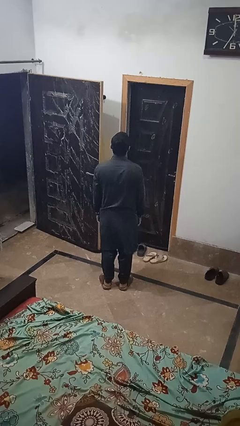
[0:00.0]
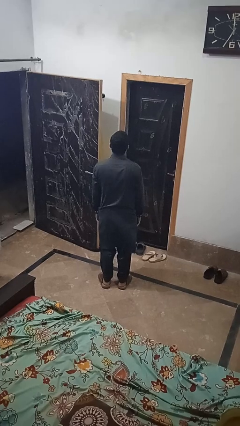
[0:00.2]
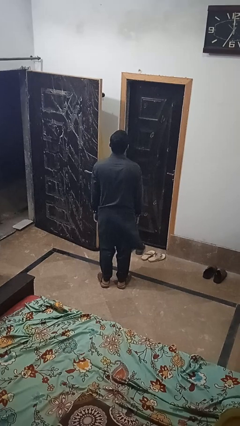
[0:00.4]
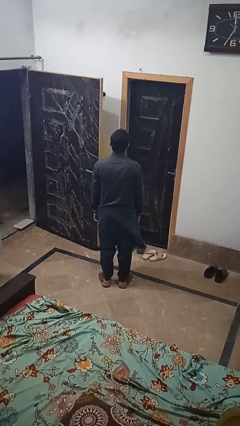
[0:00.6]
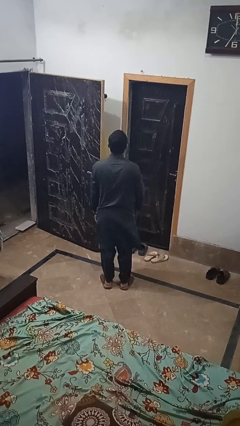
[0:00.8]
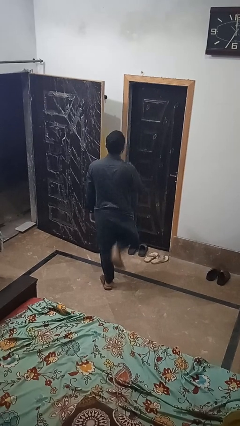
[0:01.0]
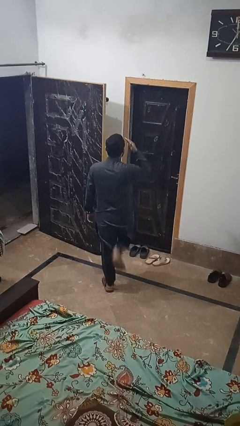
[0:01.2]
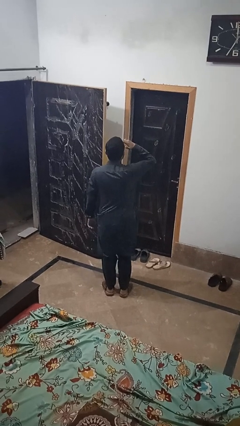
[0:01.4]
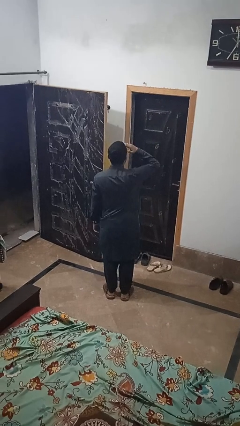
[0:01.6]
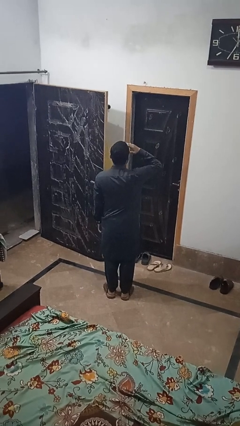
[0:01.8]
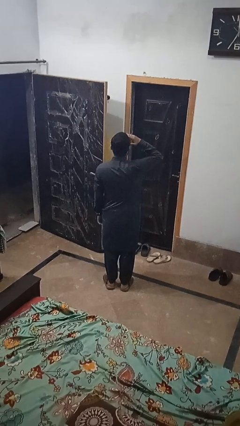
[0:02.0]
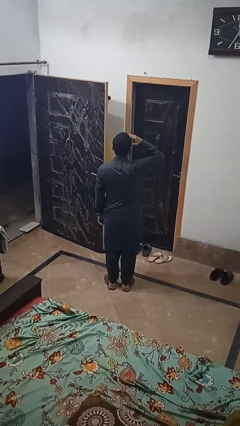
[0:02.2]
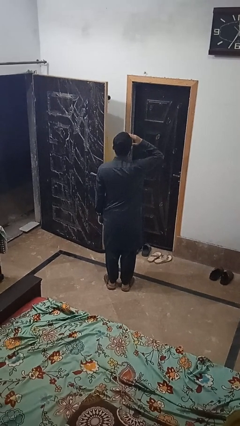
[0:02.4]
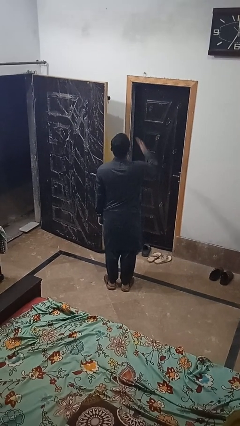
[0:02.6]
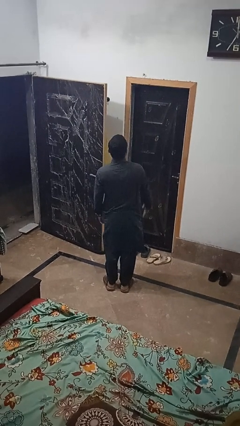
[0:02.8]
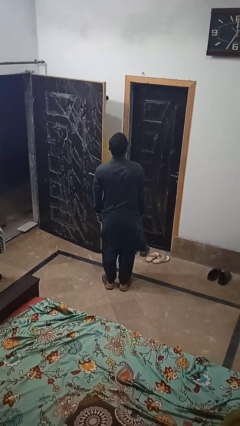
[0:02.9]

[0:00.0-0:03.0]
person salutes

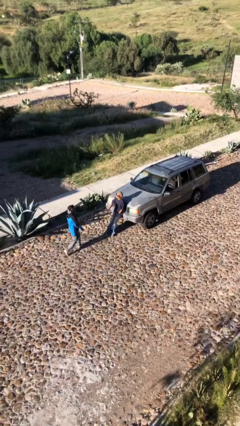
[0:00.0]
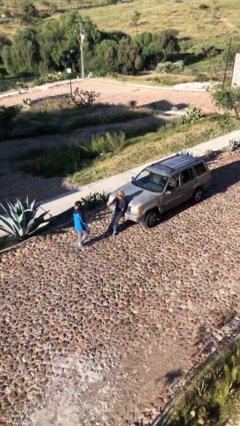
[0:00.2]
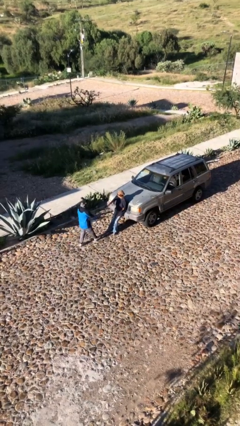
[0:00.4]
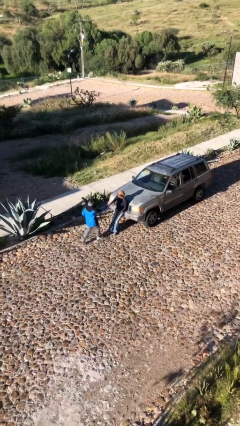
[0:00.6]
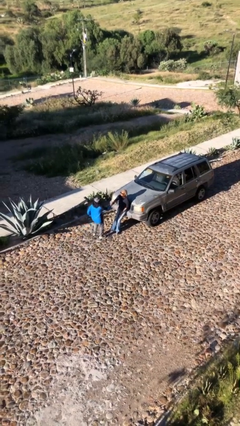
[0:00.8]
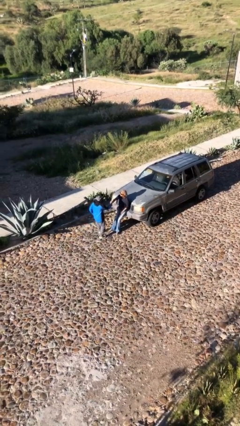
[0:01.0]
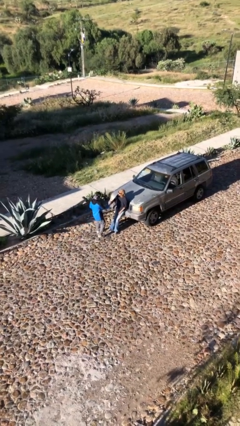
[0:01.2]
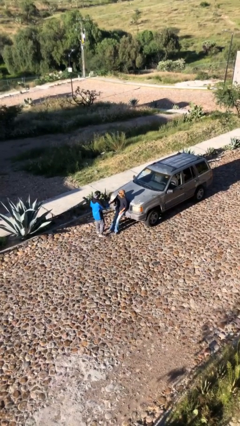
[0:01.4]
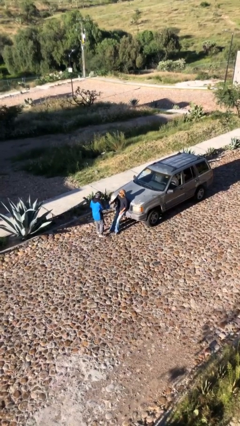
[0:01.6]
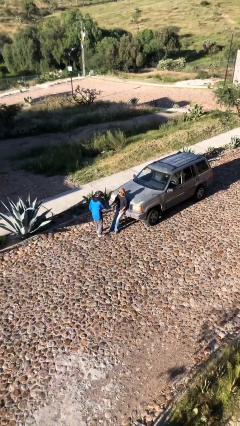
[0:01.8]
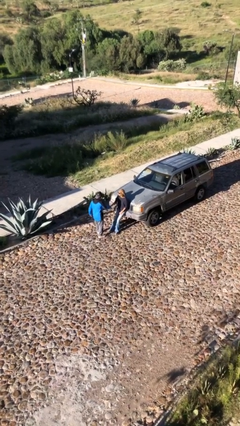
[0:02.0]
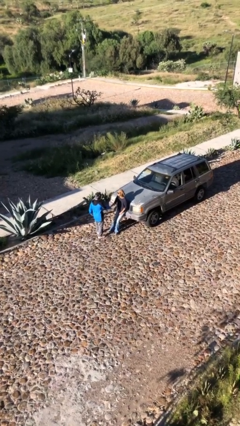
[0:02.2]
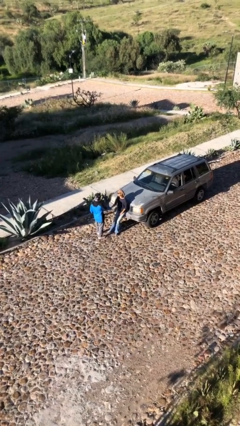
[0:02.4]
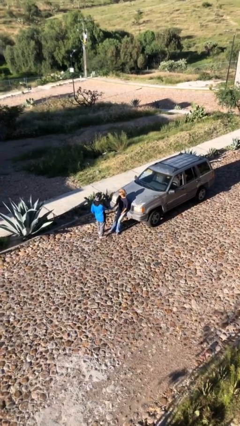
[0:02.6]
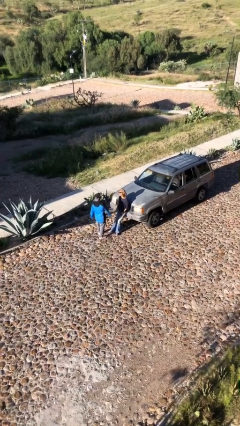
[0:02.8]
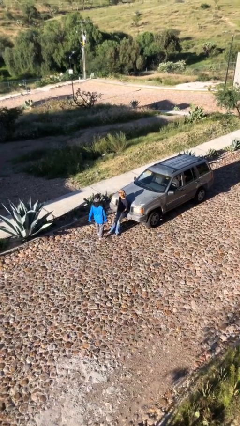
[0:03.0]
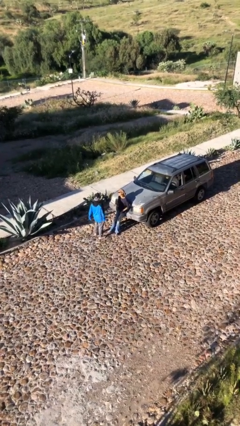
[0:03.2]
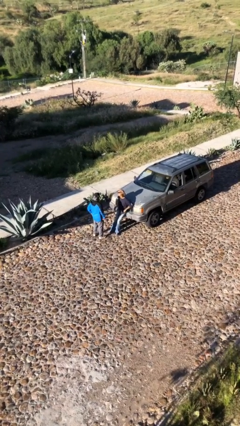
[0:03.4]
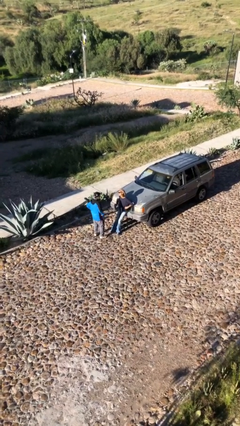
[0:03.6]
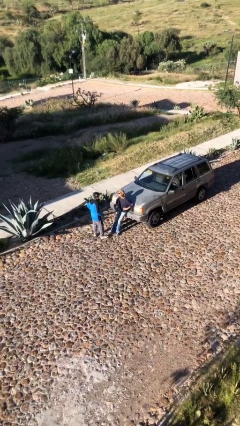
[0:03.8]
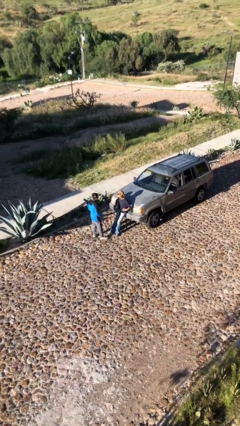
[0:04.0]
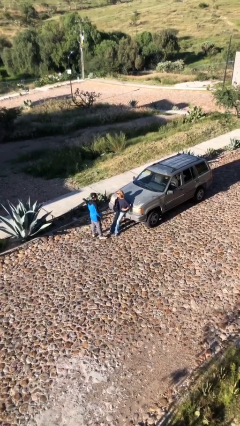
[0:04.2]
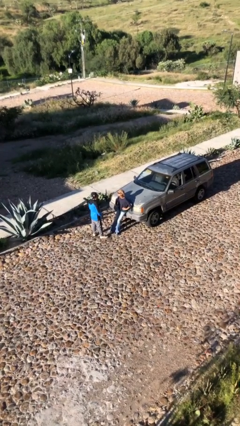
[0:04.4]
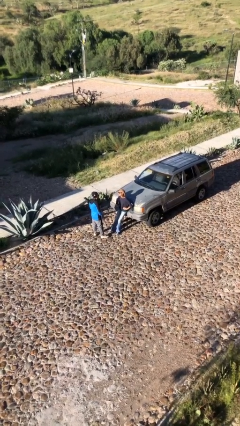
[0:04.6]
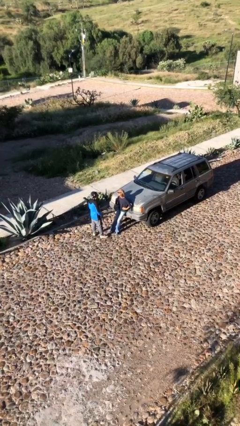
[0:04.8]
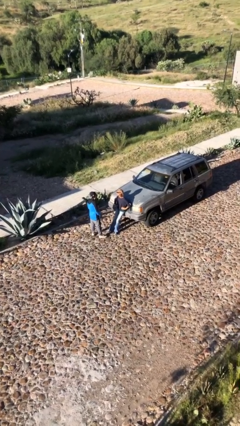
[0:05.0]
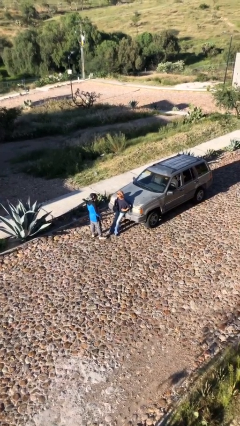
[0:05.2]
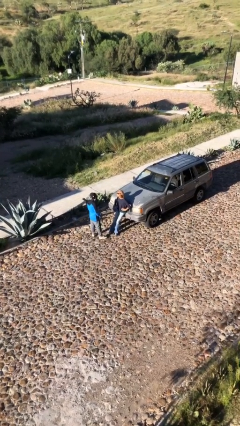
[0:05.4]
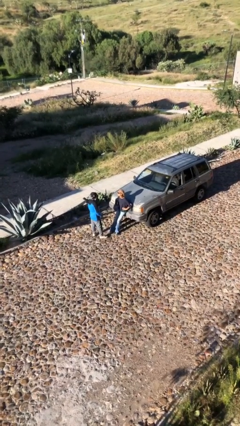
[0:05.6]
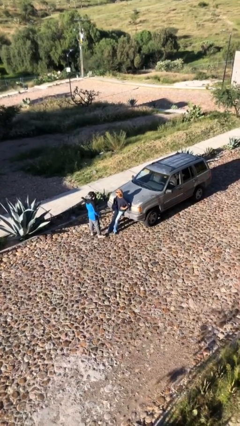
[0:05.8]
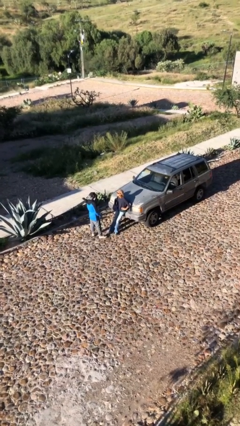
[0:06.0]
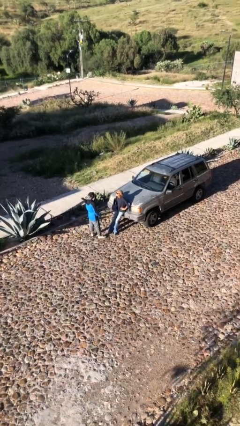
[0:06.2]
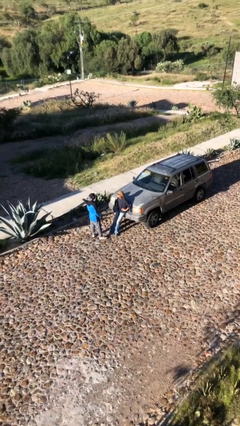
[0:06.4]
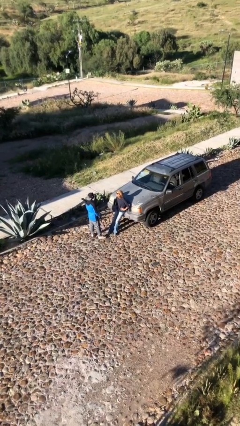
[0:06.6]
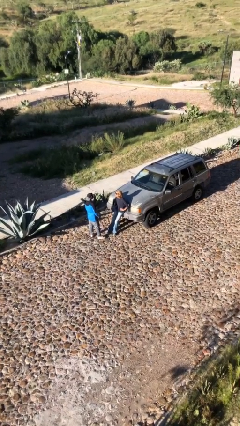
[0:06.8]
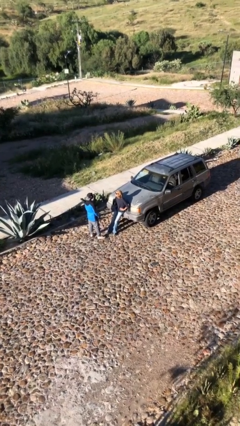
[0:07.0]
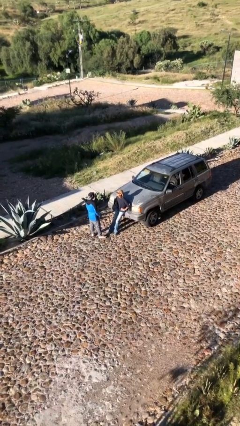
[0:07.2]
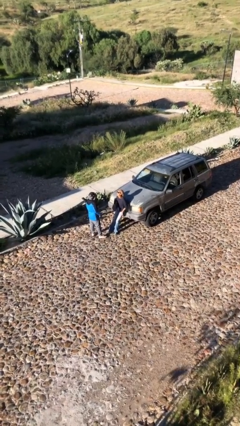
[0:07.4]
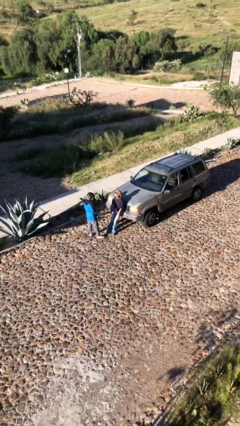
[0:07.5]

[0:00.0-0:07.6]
person shakes hand

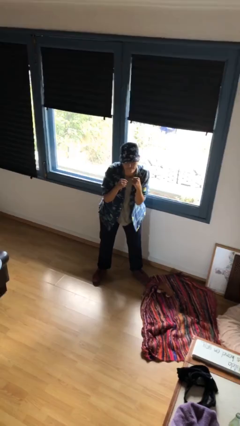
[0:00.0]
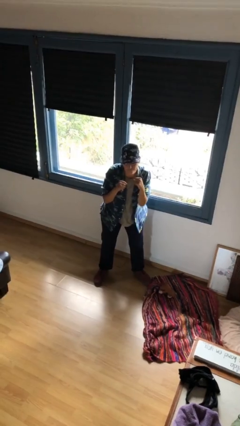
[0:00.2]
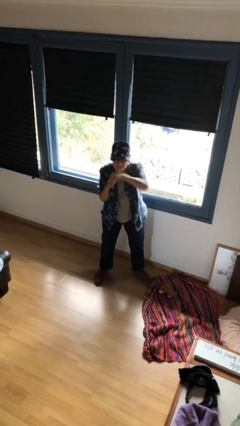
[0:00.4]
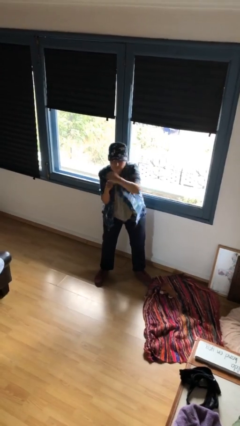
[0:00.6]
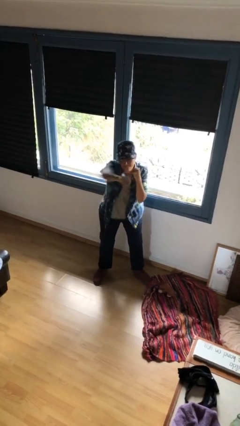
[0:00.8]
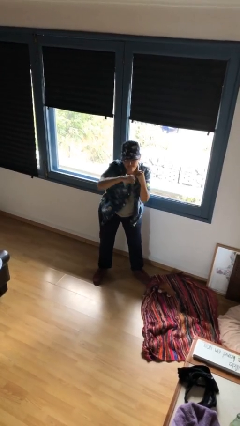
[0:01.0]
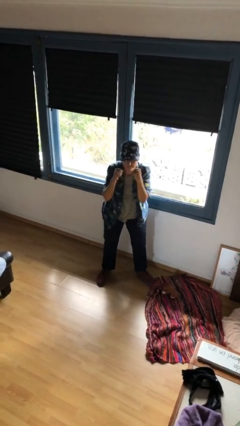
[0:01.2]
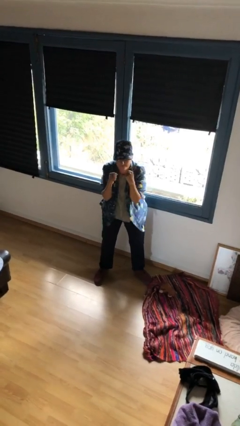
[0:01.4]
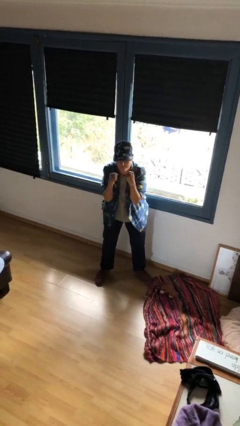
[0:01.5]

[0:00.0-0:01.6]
person punches

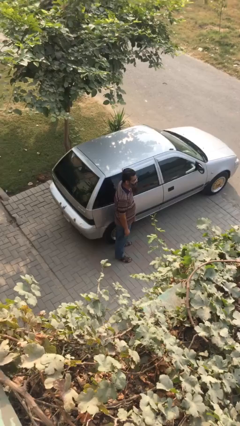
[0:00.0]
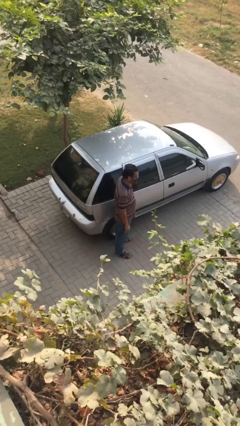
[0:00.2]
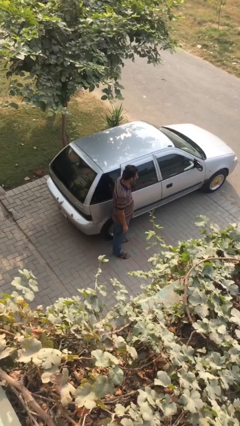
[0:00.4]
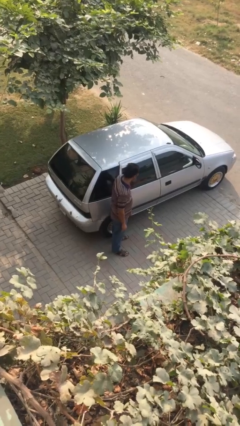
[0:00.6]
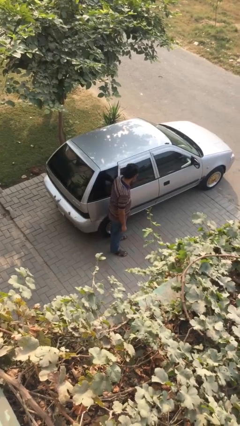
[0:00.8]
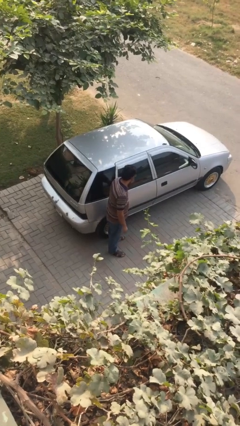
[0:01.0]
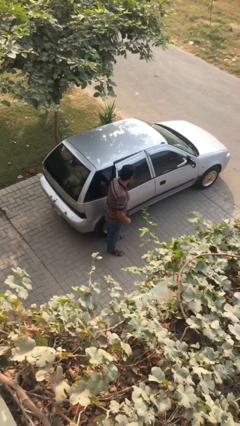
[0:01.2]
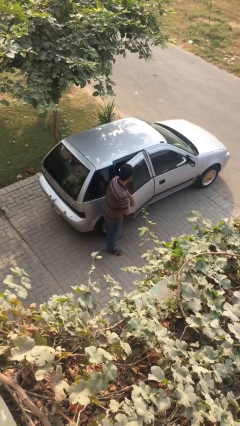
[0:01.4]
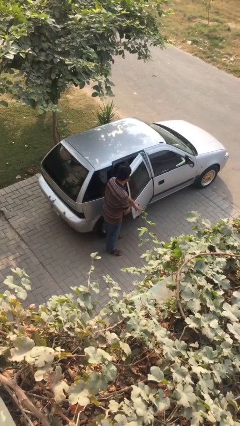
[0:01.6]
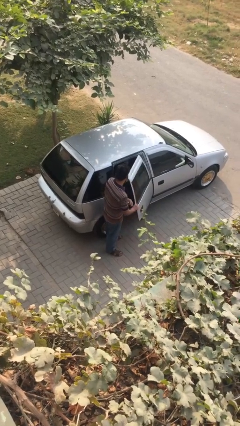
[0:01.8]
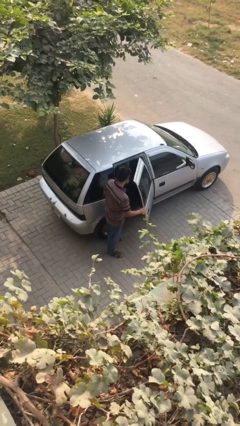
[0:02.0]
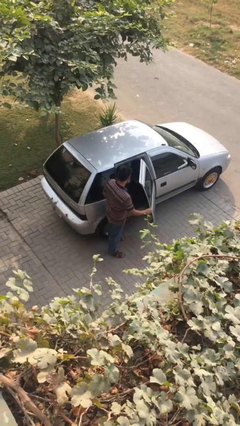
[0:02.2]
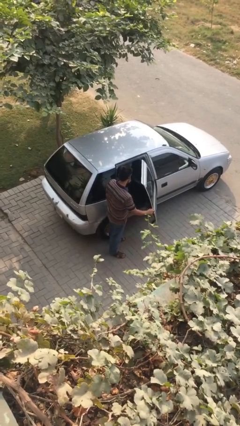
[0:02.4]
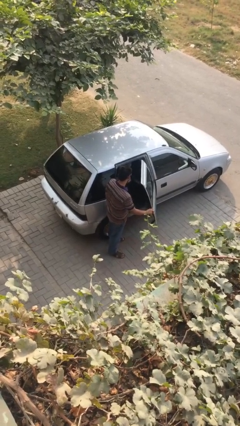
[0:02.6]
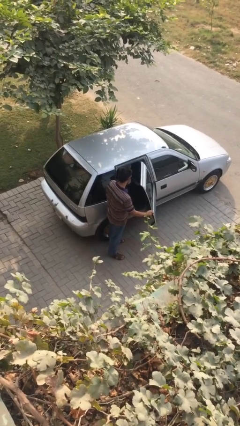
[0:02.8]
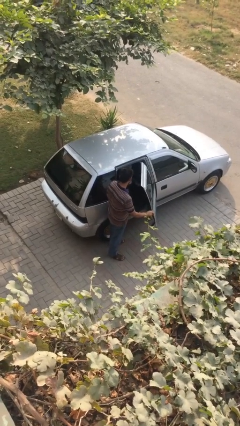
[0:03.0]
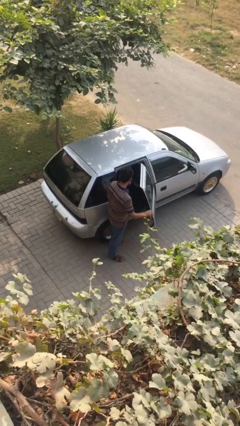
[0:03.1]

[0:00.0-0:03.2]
person opens car door

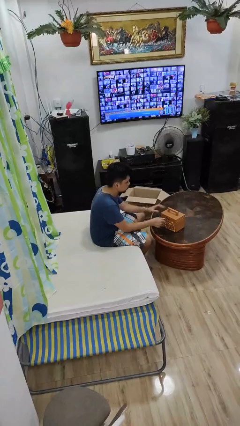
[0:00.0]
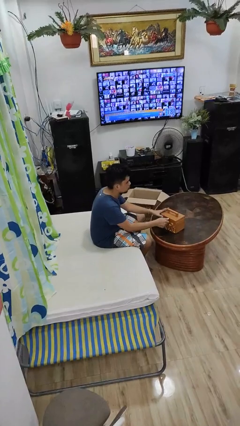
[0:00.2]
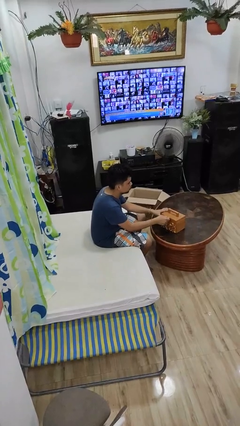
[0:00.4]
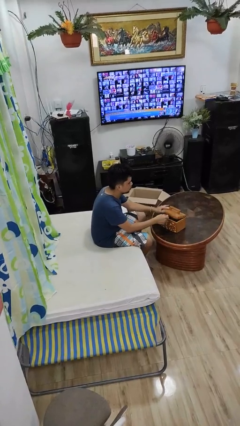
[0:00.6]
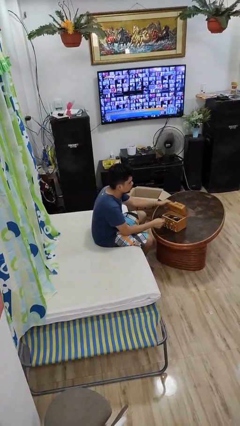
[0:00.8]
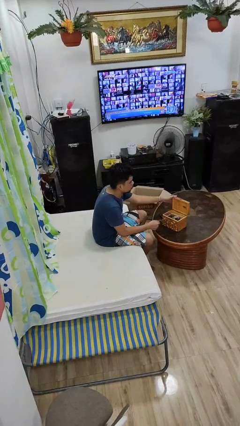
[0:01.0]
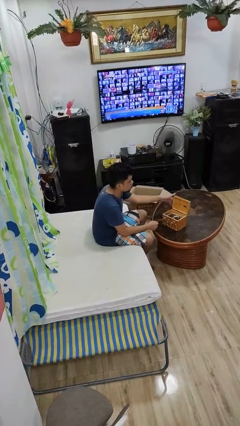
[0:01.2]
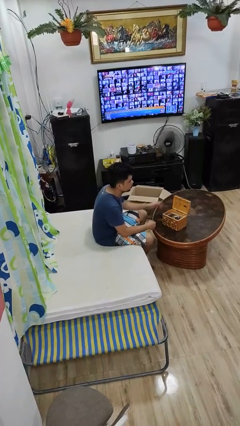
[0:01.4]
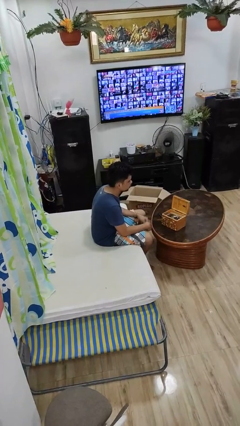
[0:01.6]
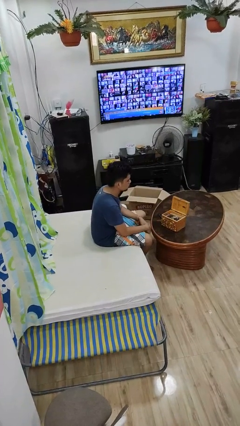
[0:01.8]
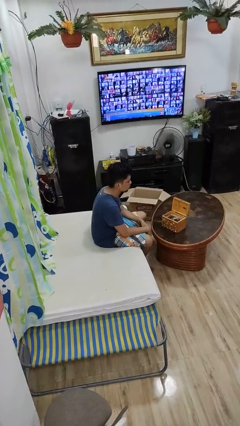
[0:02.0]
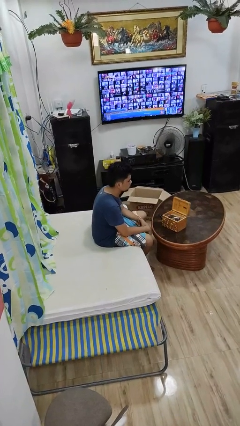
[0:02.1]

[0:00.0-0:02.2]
person opens jewelry box

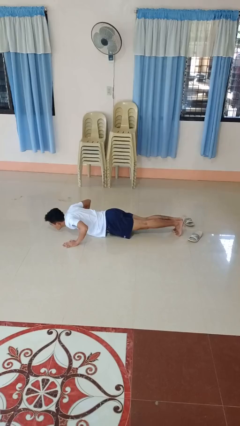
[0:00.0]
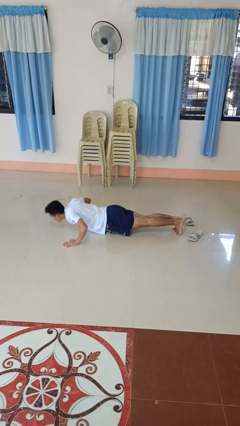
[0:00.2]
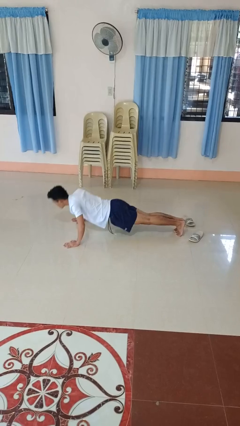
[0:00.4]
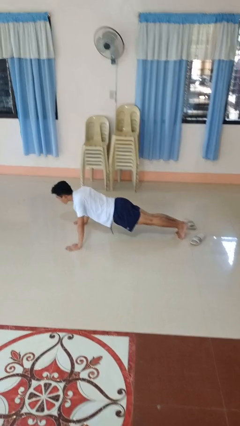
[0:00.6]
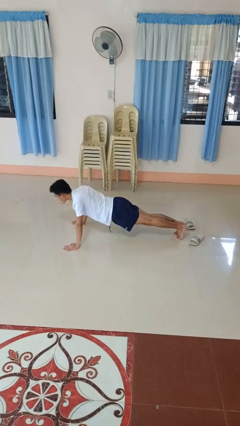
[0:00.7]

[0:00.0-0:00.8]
person exercises with pushup
